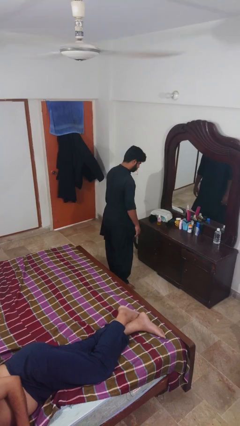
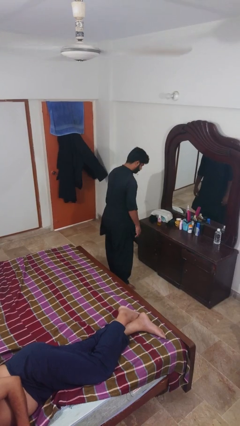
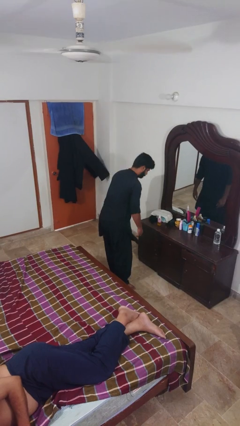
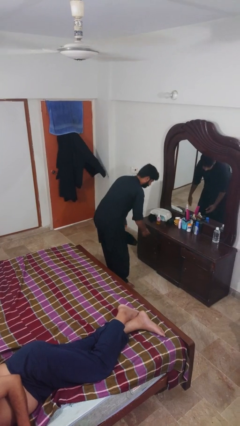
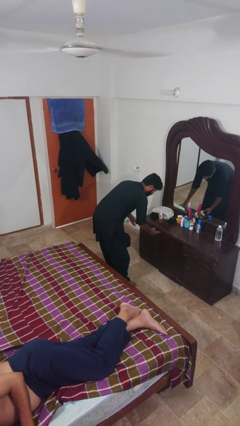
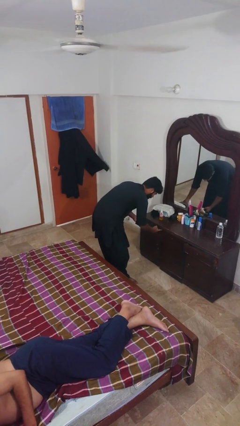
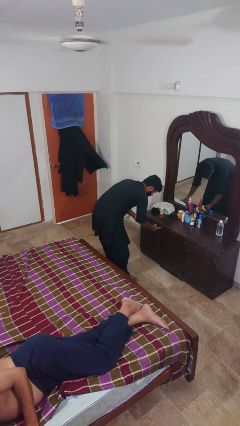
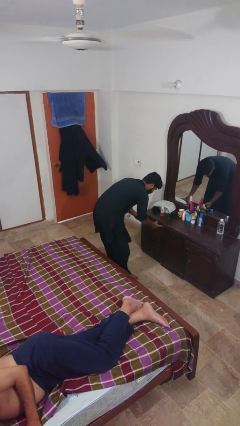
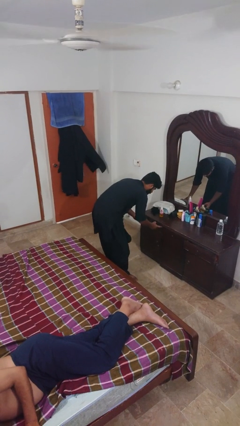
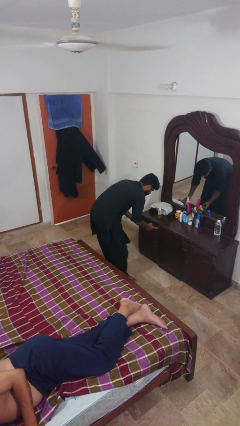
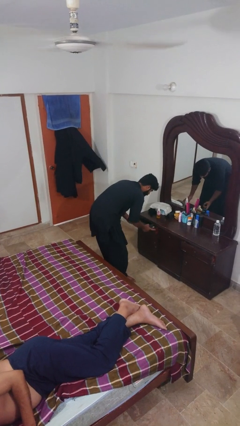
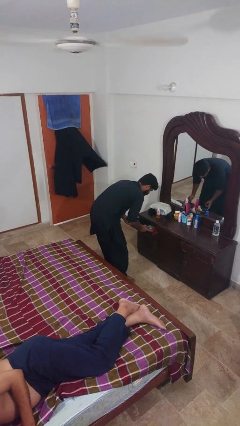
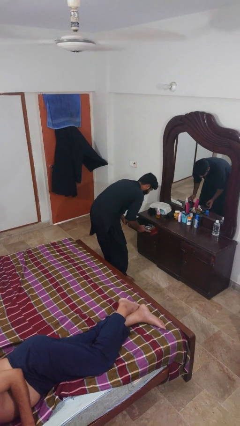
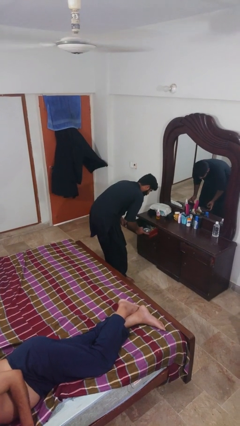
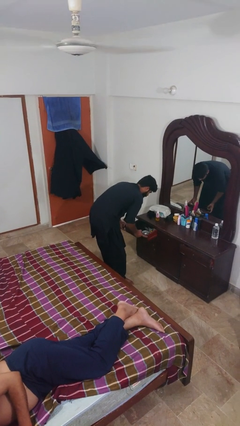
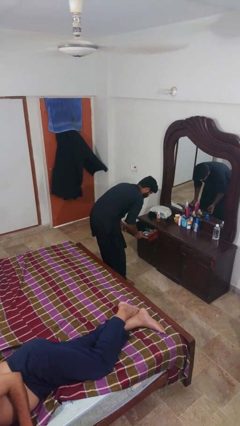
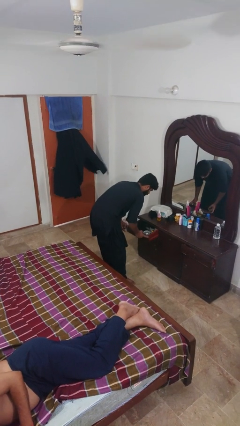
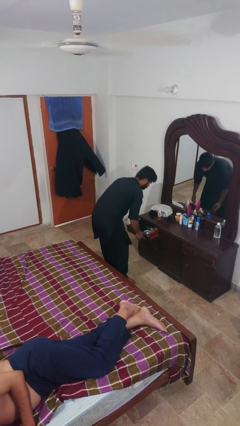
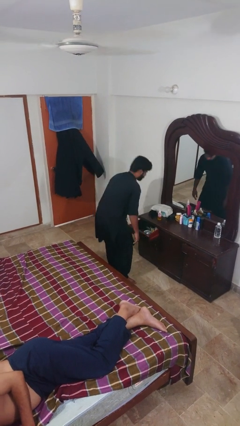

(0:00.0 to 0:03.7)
person opens dresser drawer

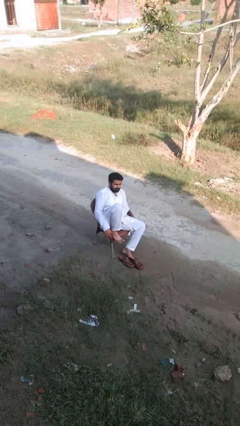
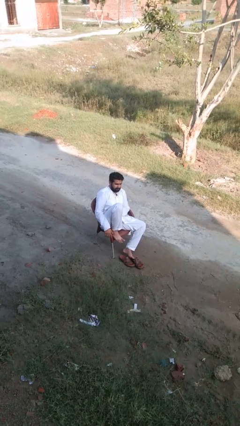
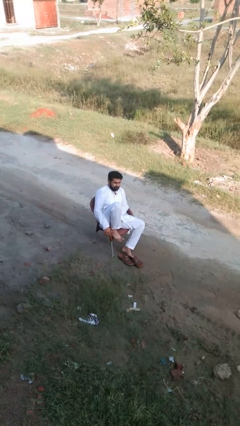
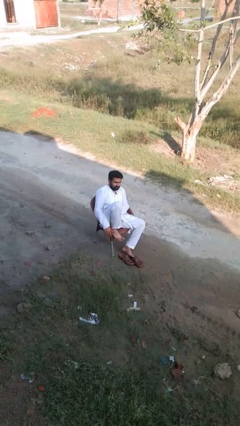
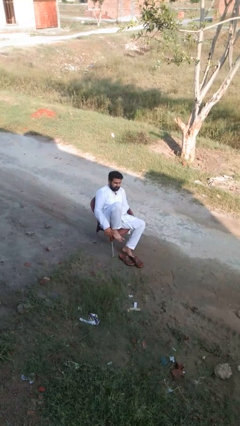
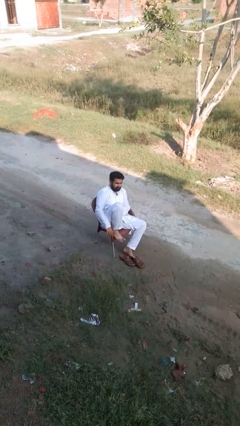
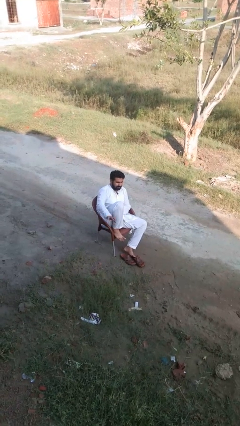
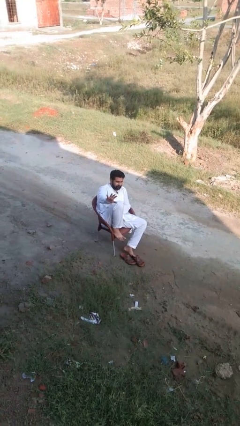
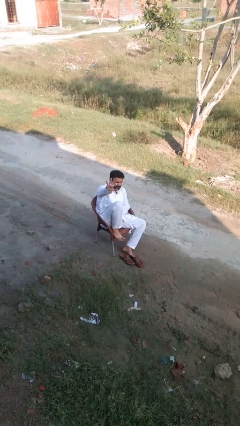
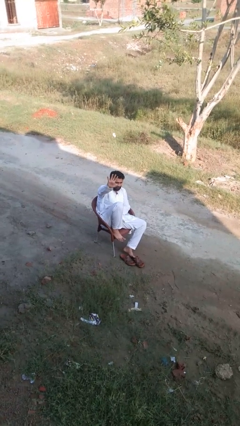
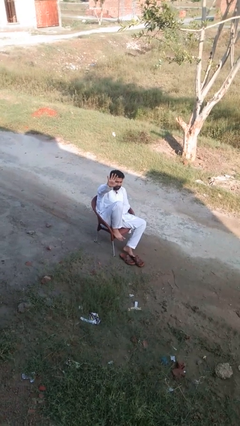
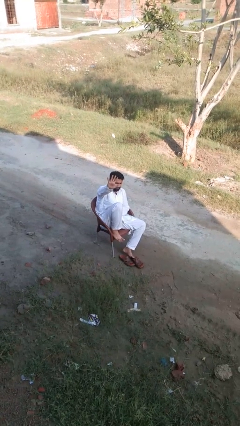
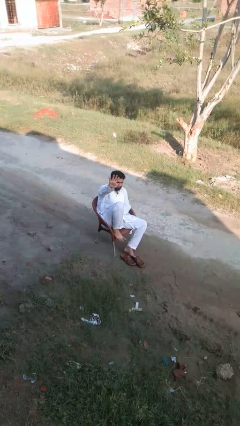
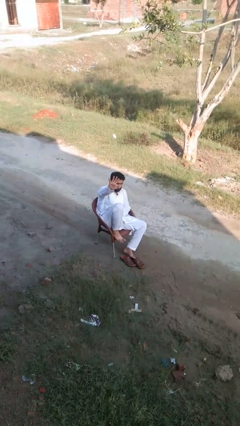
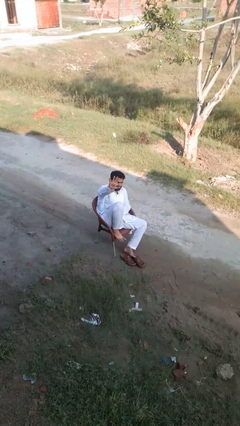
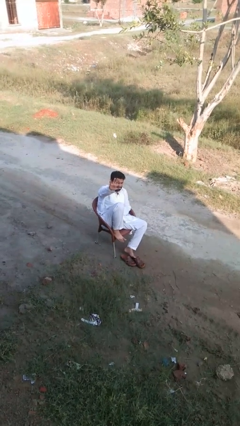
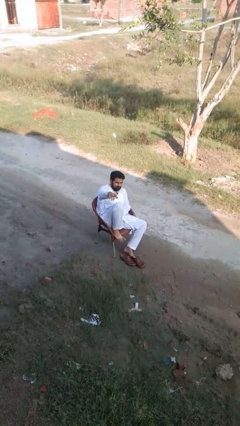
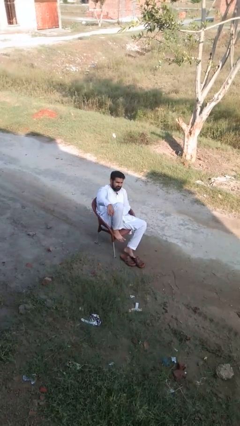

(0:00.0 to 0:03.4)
person gestures number five

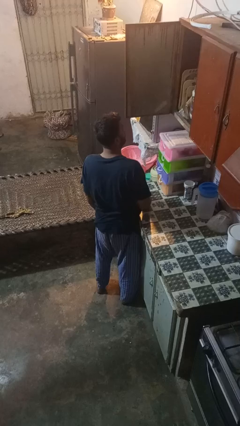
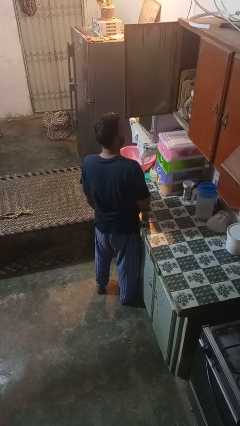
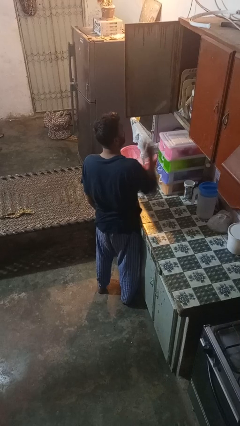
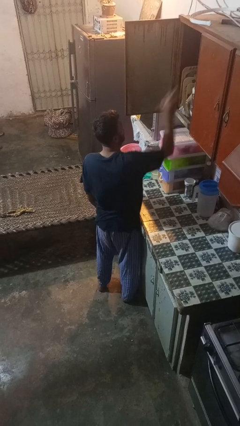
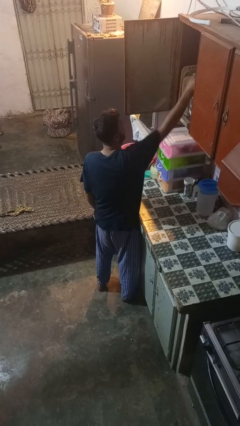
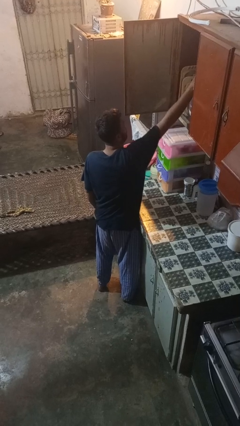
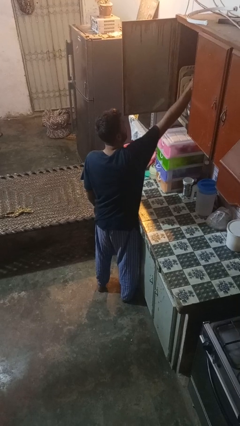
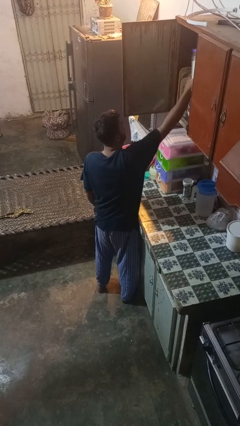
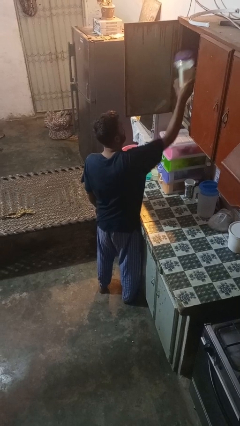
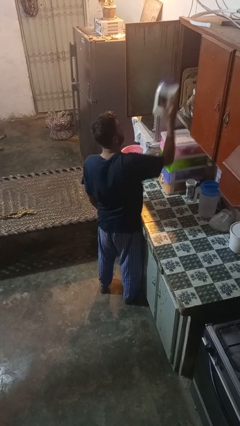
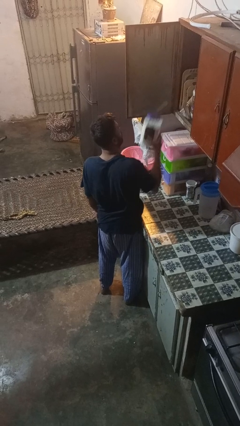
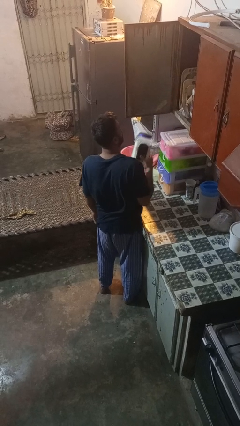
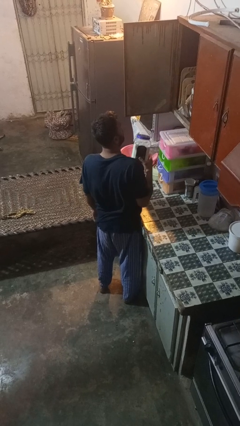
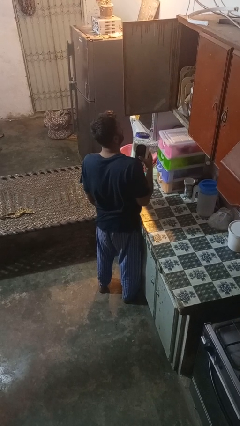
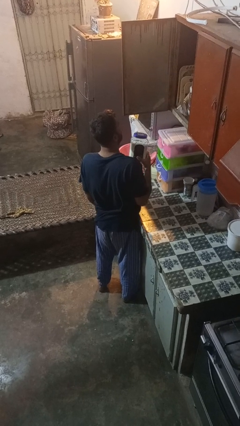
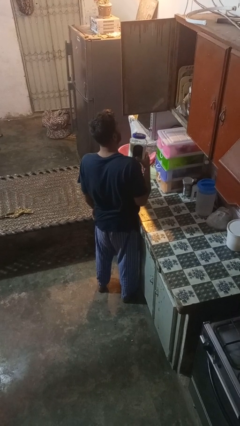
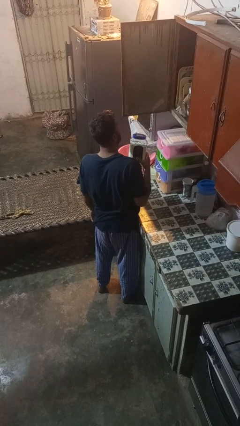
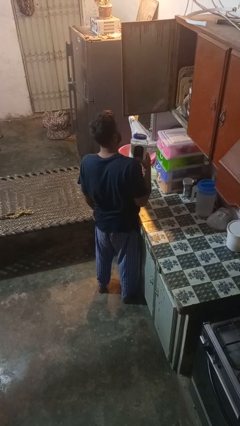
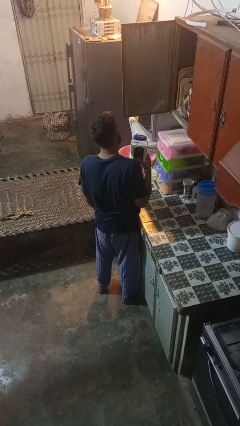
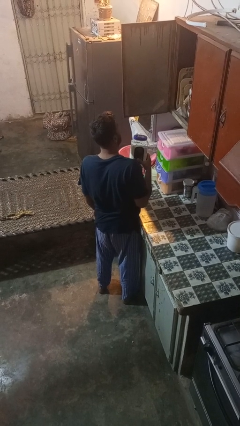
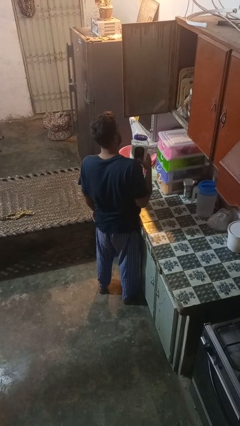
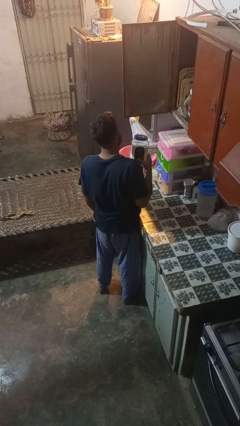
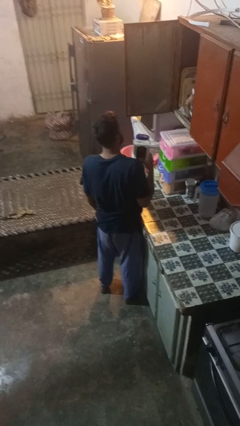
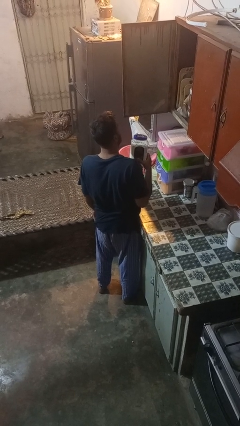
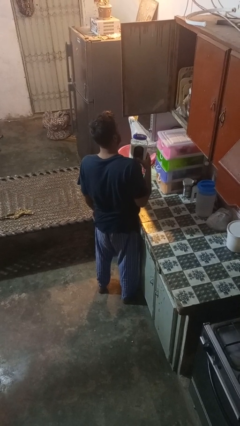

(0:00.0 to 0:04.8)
person puts object in cabinet

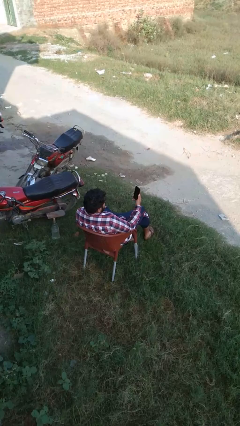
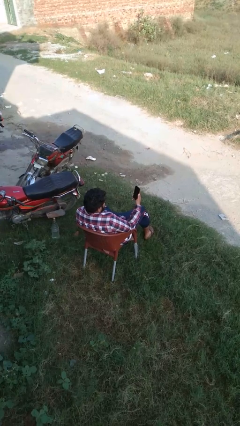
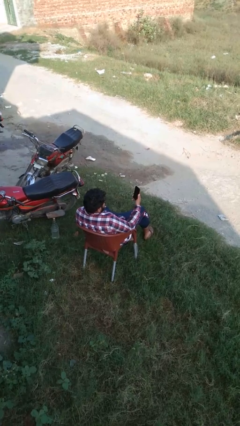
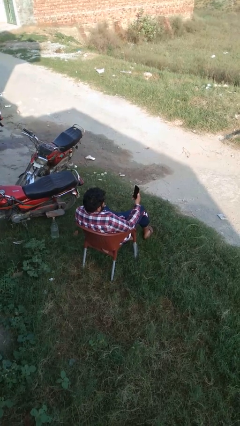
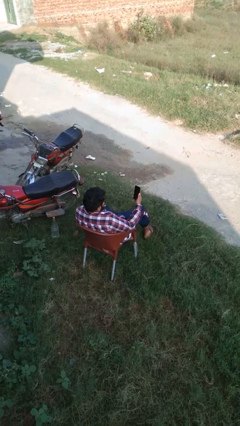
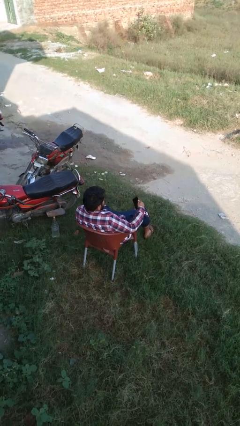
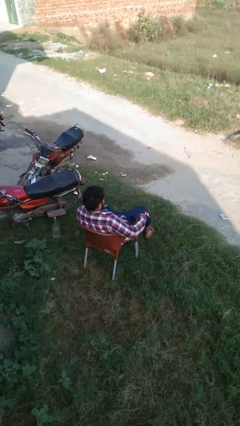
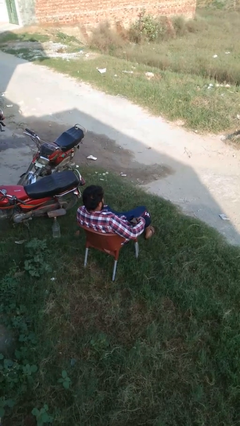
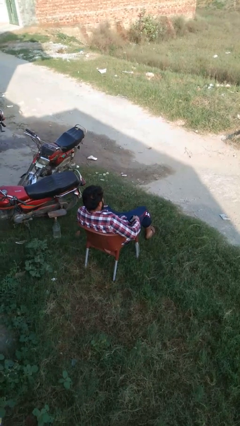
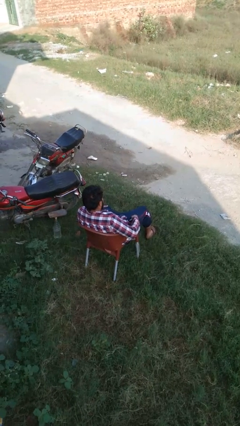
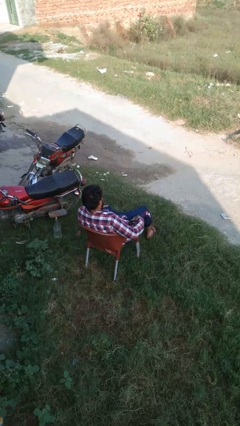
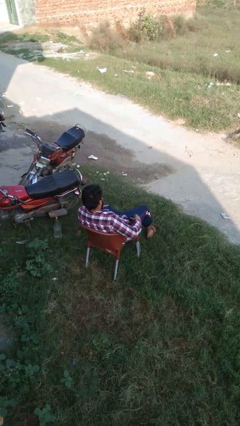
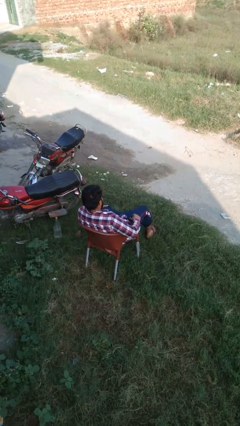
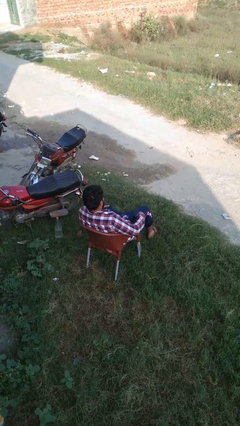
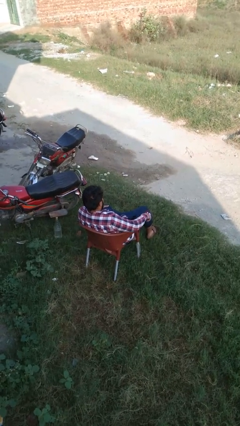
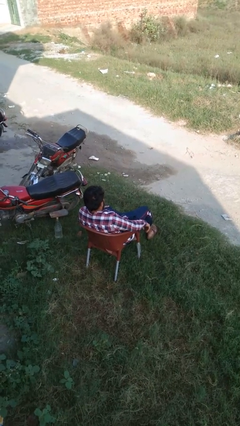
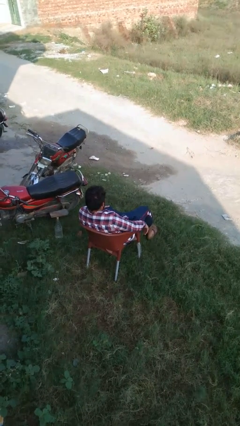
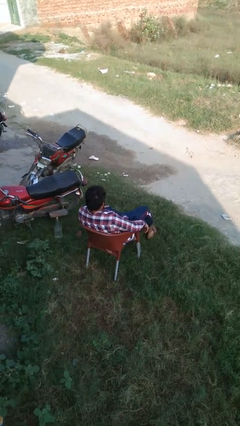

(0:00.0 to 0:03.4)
person puts phone into pocket

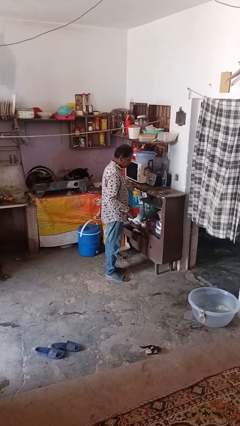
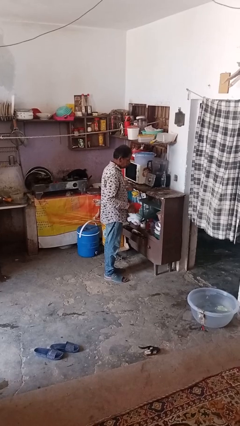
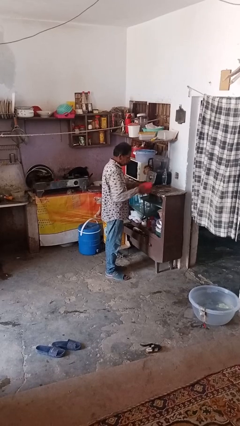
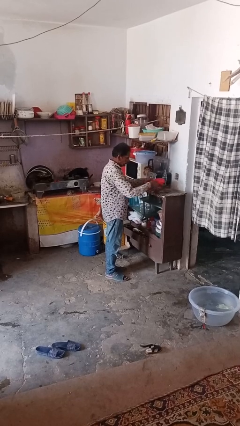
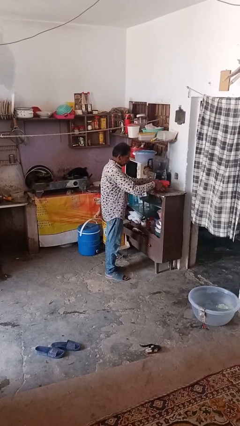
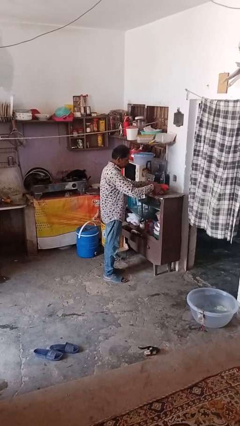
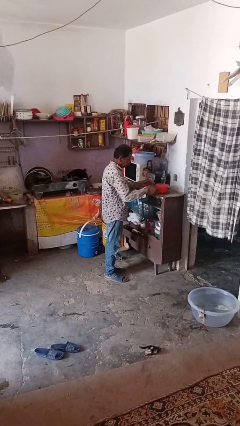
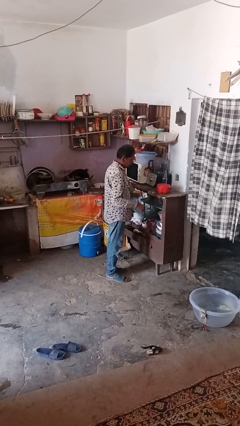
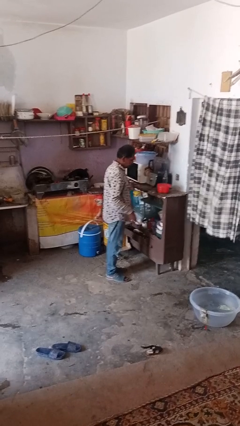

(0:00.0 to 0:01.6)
person puts down object on countertop

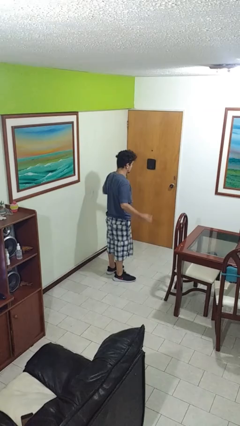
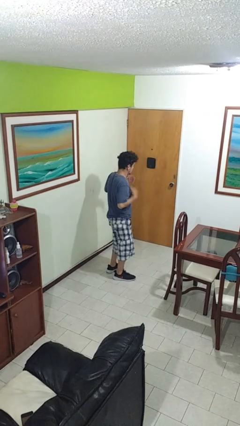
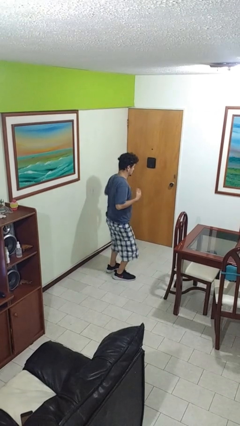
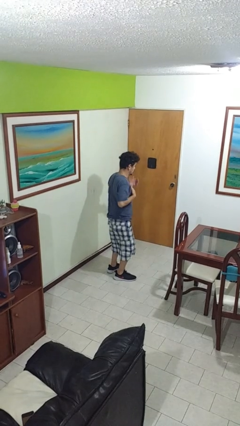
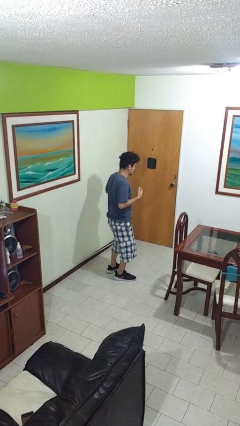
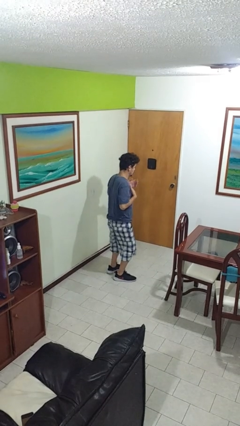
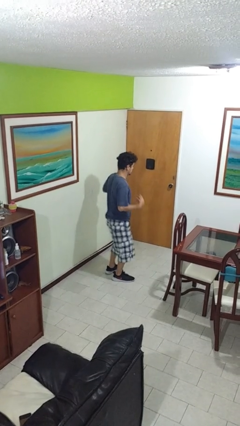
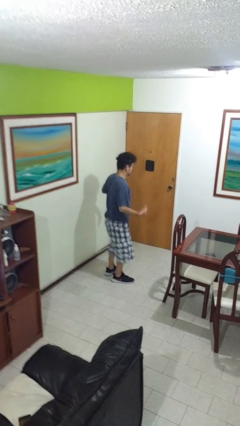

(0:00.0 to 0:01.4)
person drums on chest
